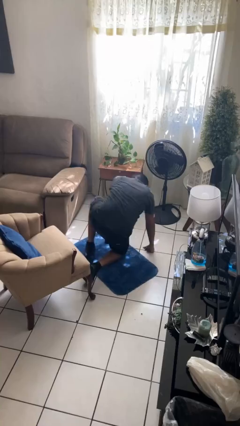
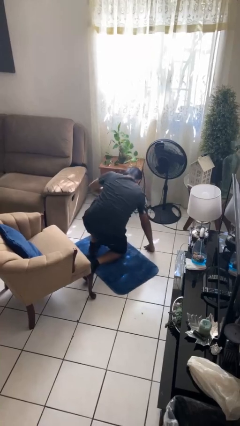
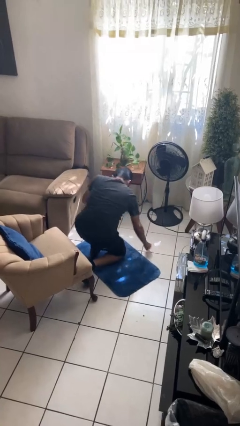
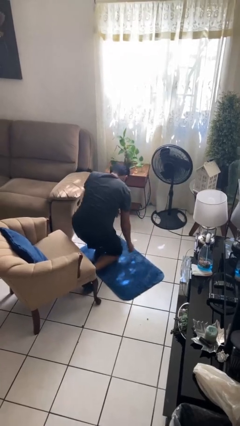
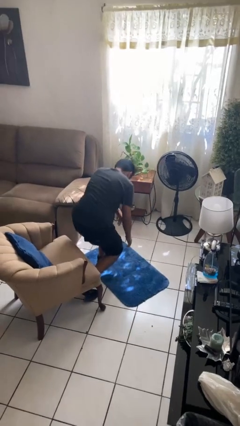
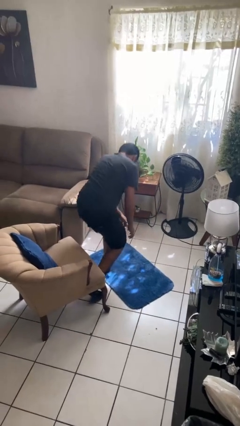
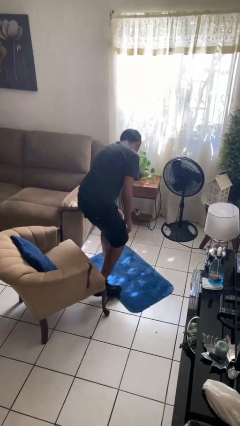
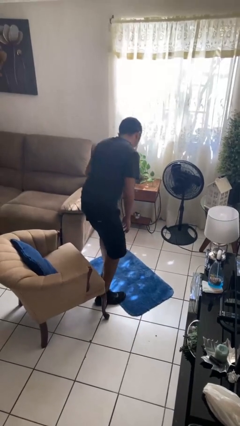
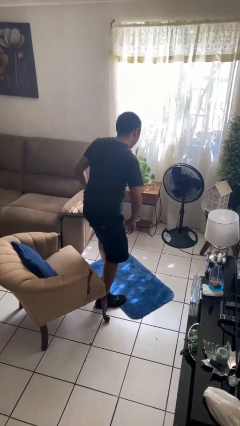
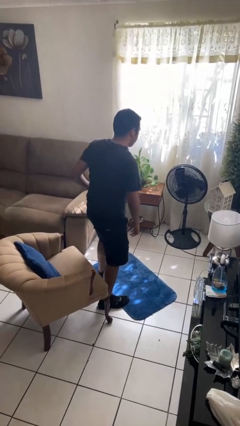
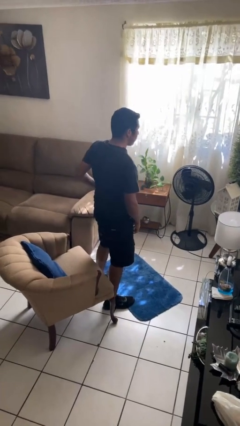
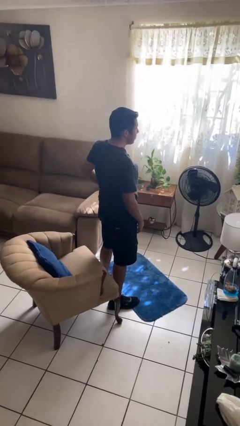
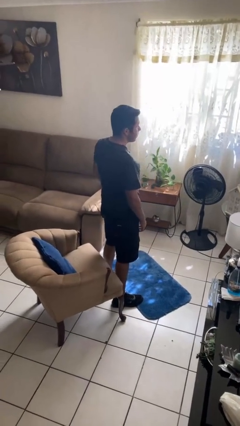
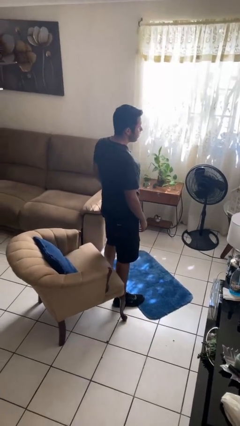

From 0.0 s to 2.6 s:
person stands up from floor

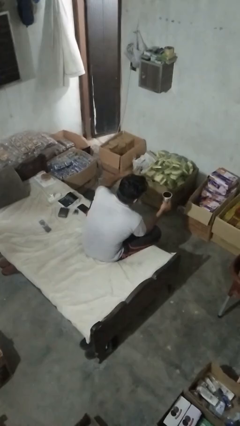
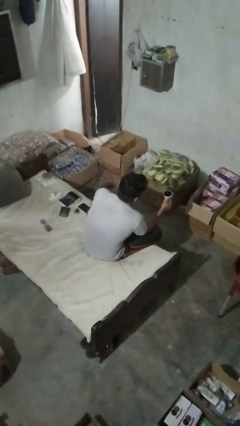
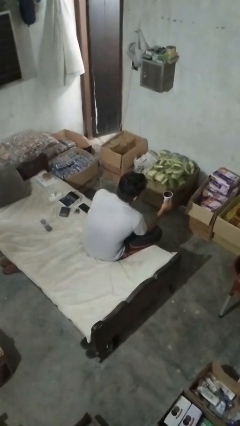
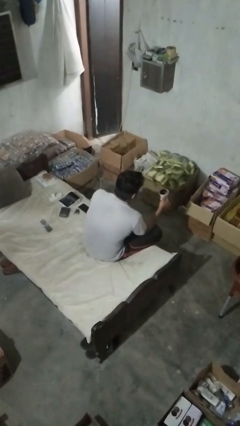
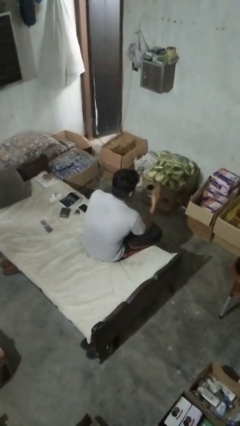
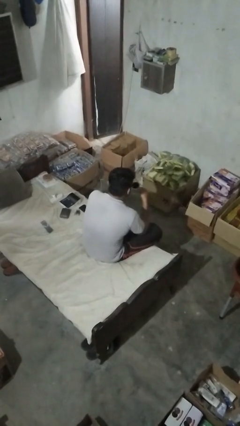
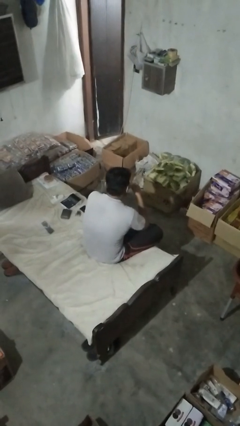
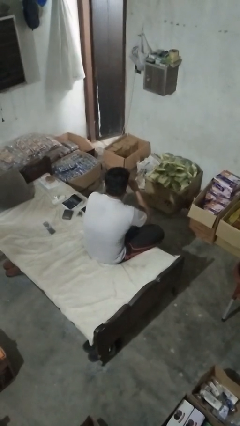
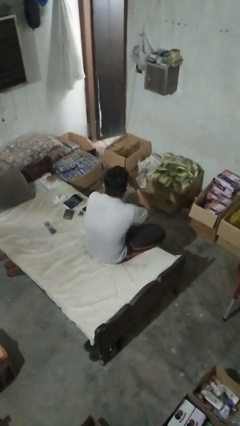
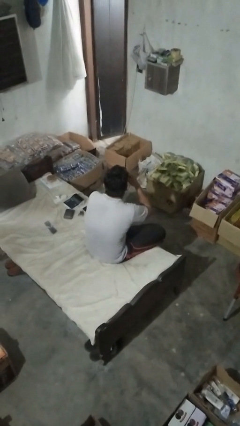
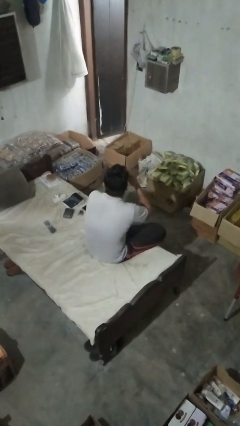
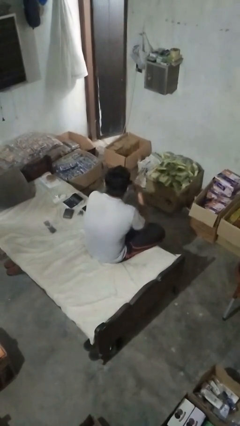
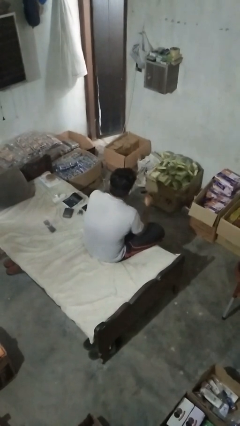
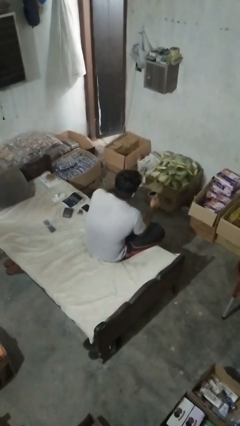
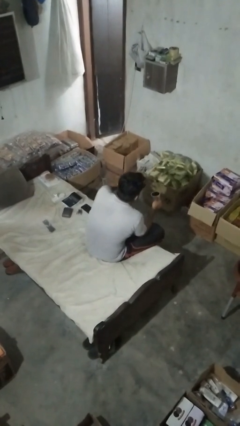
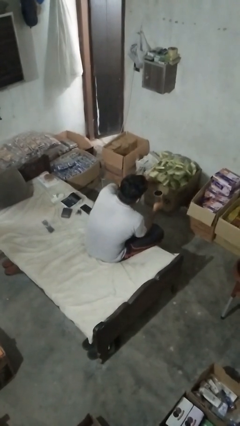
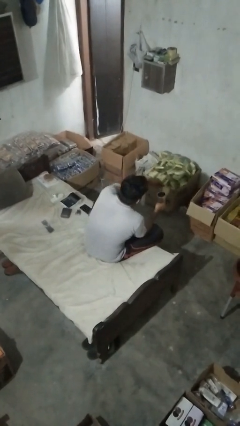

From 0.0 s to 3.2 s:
person drinks from mug

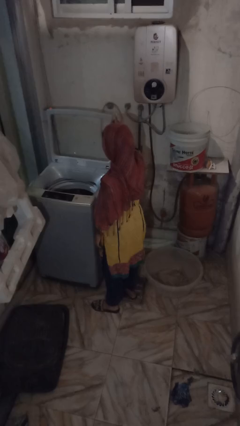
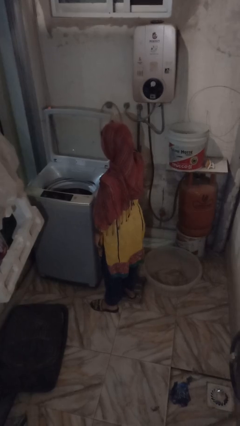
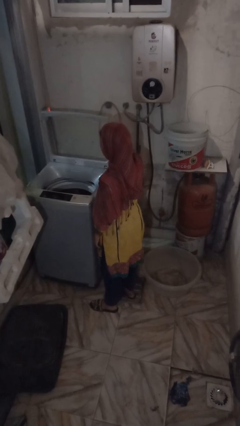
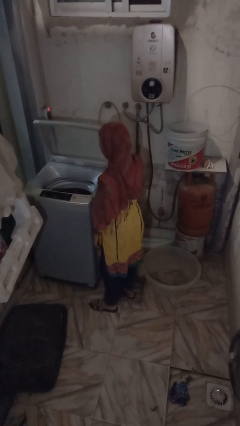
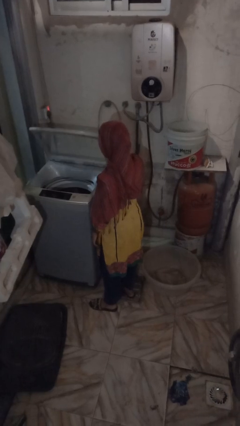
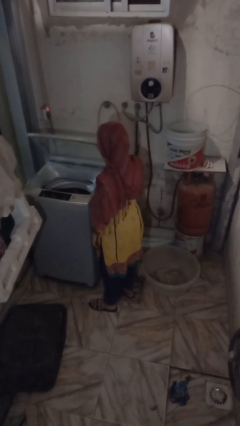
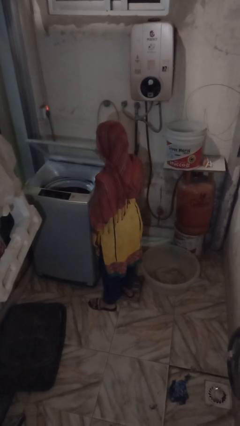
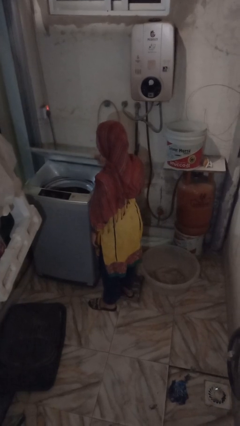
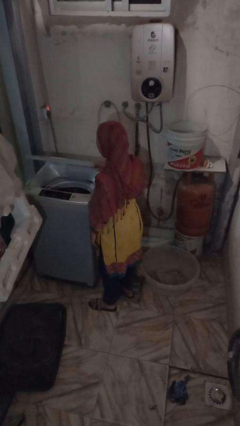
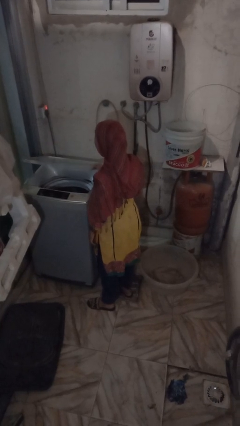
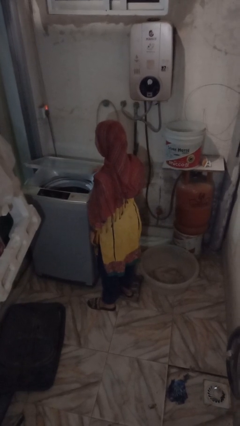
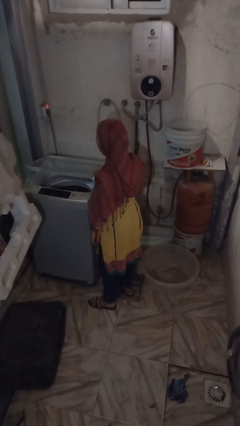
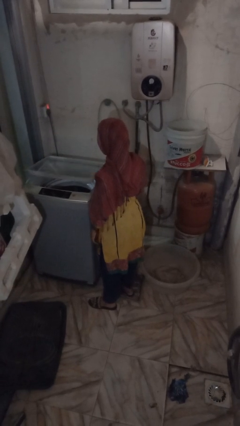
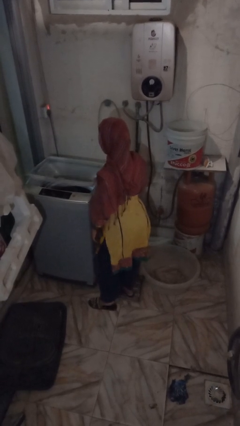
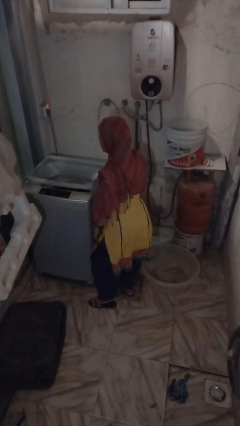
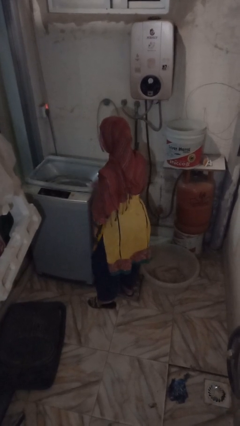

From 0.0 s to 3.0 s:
person closes clothes washer

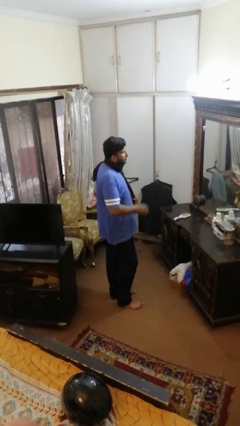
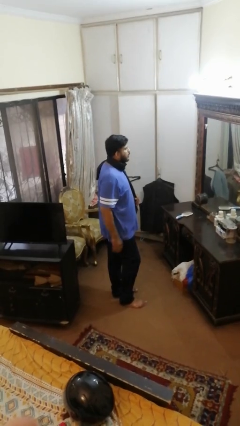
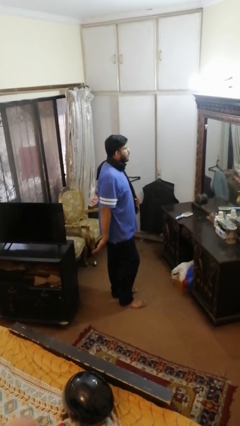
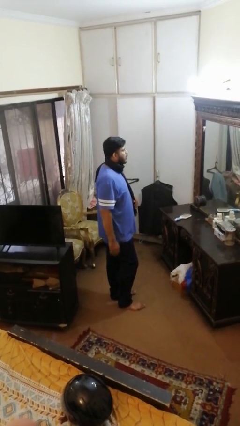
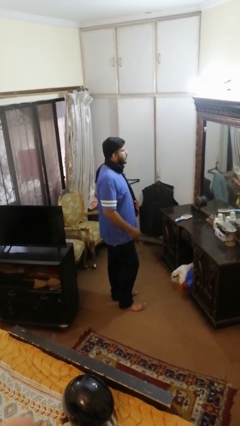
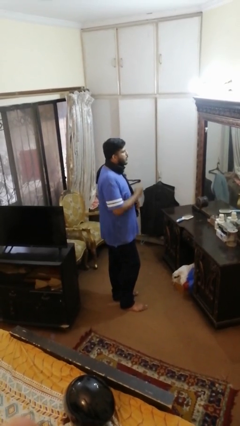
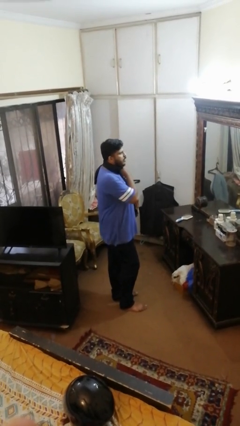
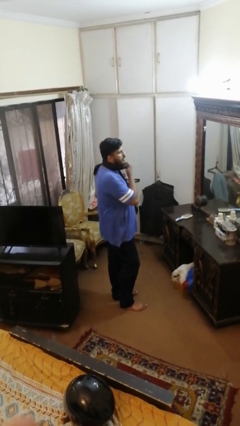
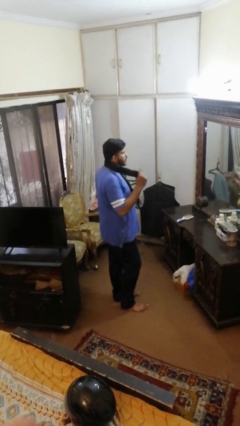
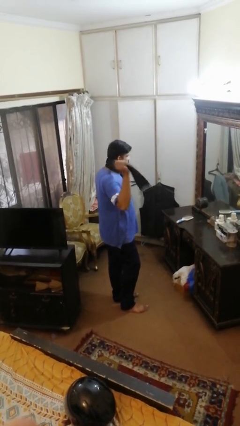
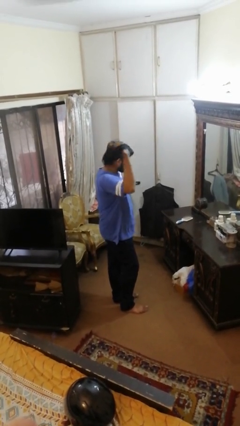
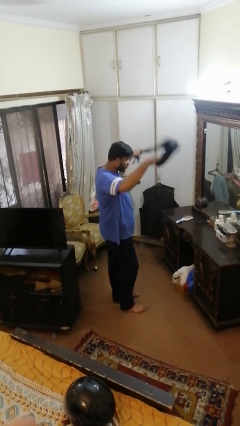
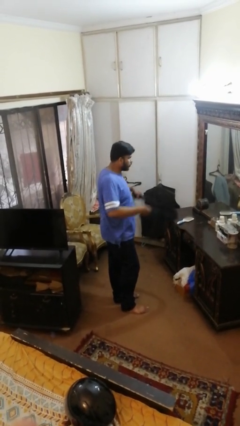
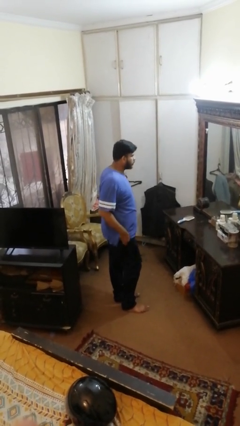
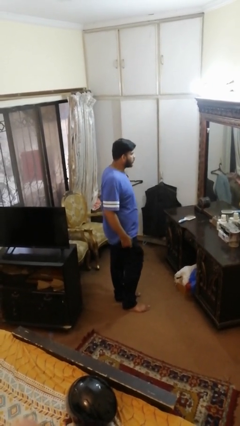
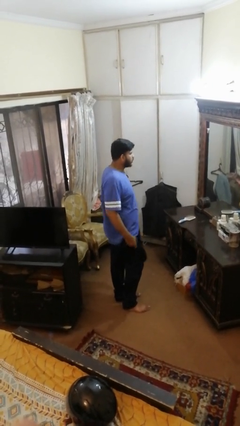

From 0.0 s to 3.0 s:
person takes off scarf

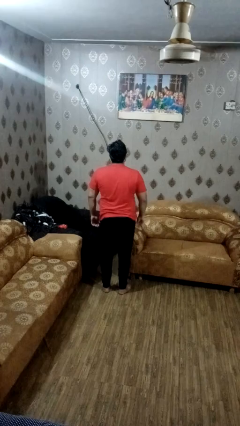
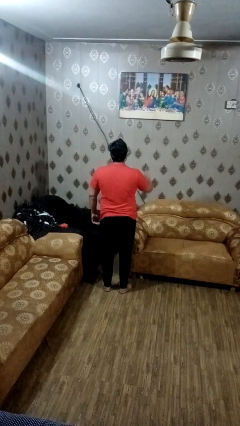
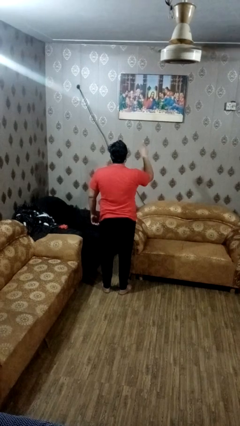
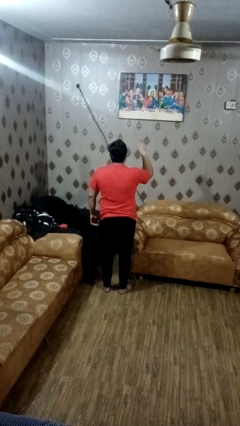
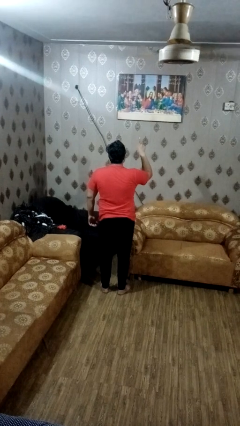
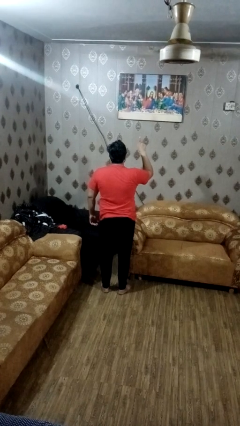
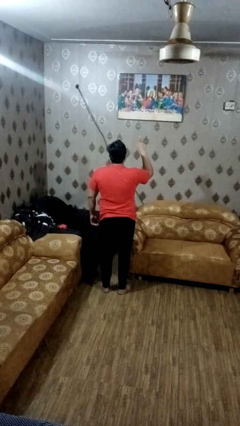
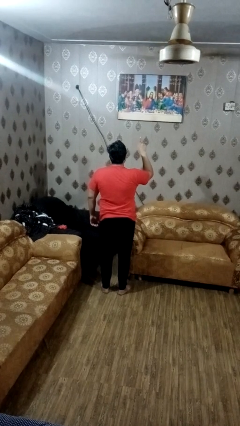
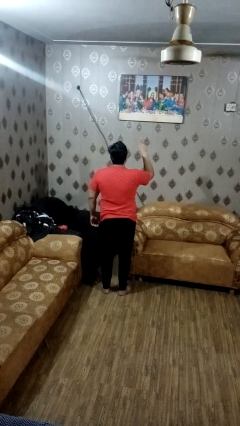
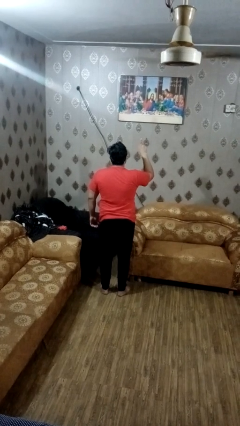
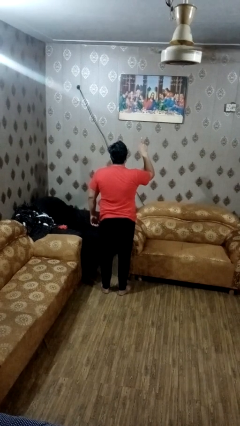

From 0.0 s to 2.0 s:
person gestures number one

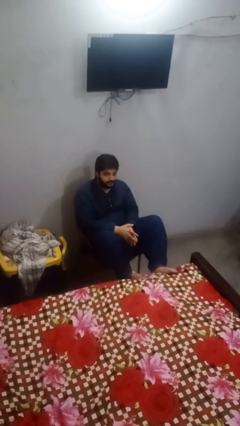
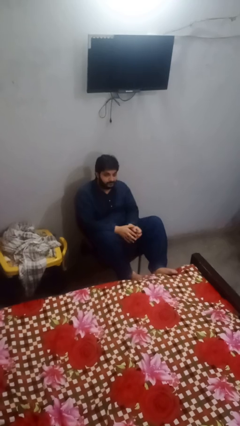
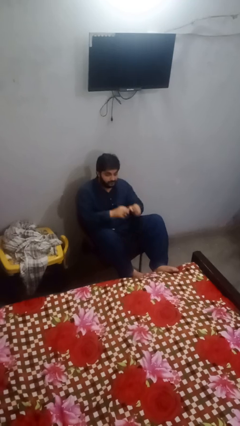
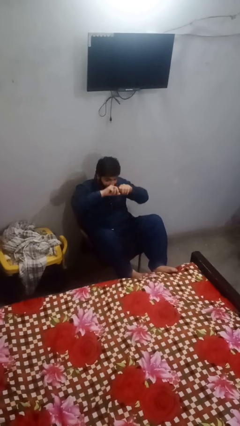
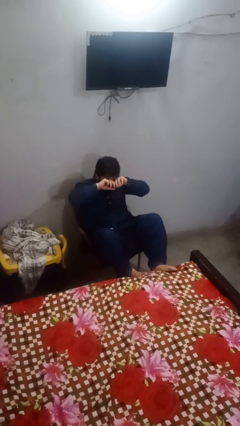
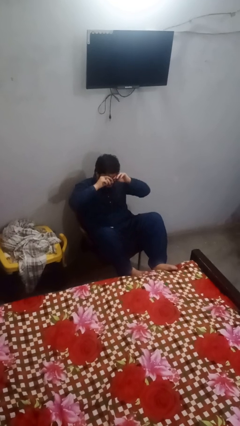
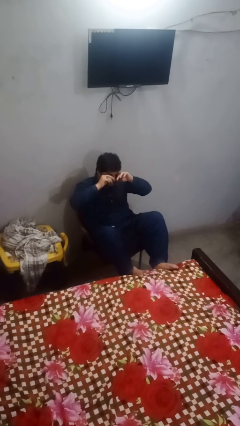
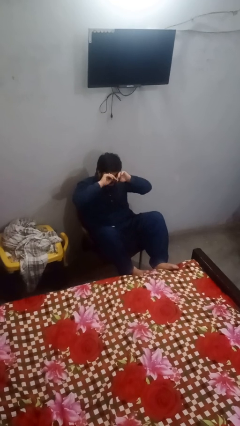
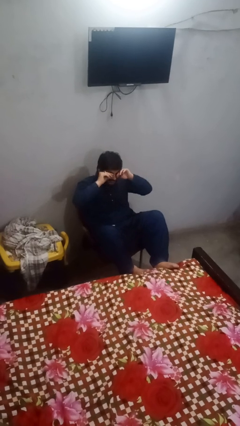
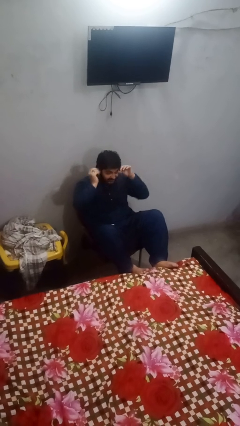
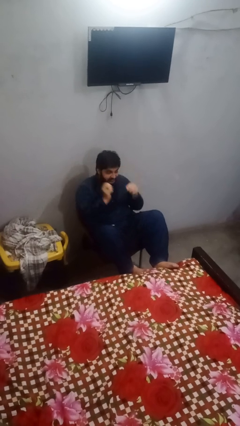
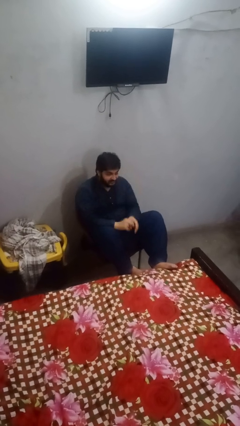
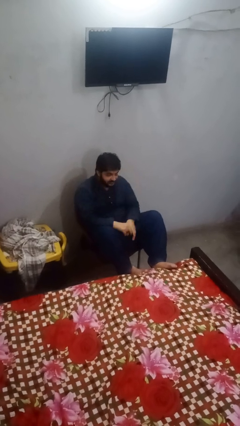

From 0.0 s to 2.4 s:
person rubs eyes

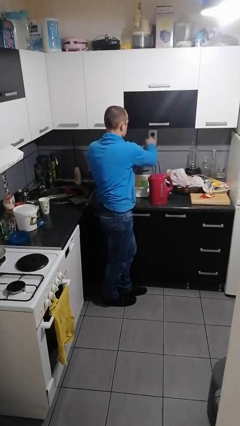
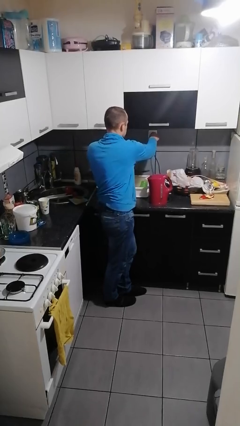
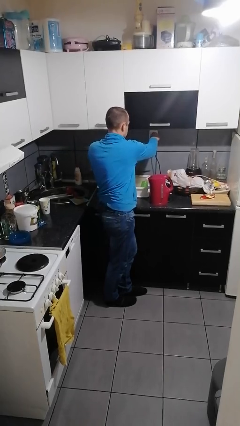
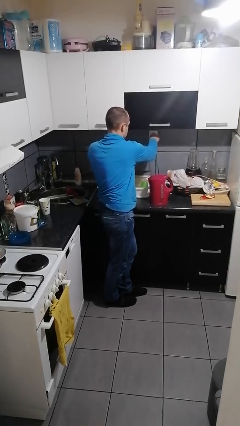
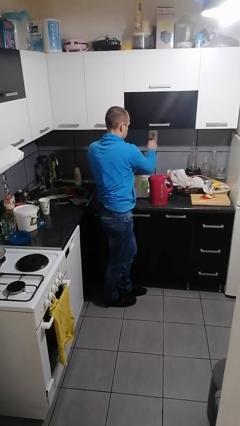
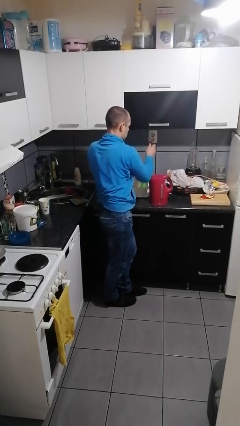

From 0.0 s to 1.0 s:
person unplugs from electrical socket
